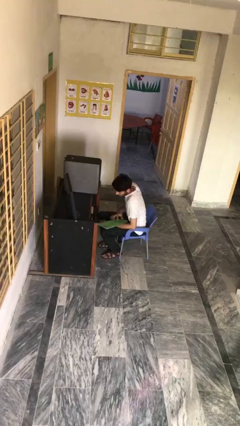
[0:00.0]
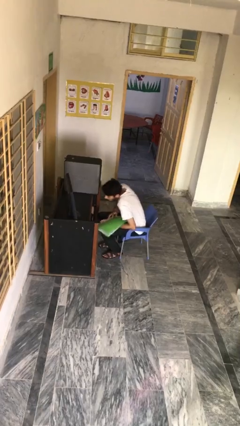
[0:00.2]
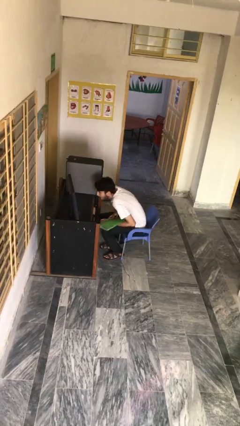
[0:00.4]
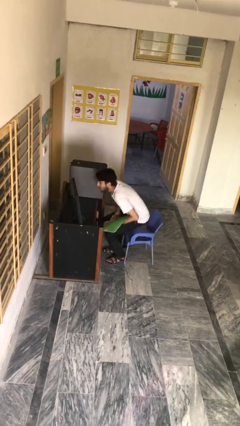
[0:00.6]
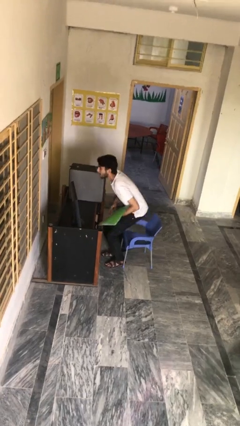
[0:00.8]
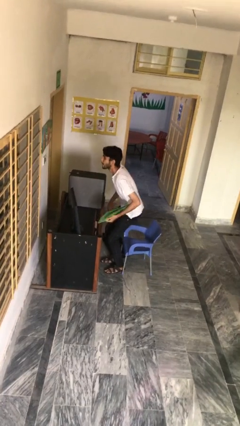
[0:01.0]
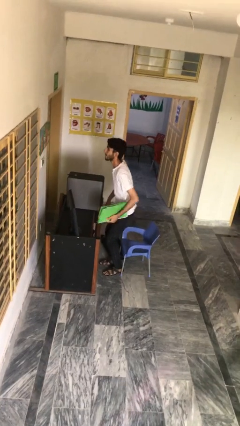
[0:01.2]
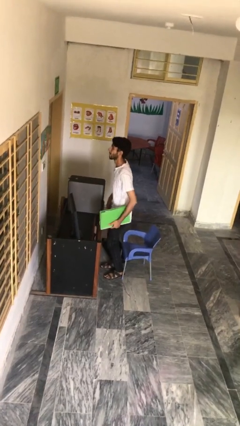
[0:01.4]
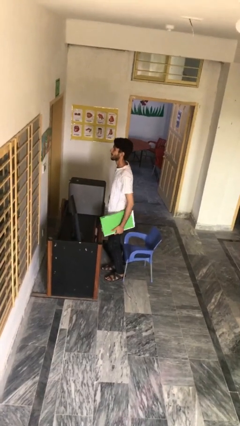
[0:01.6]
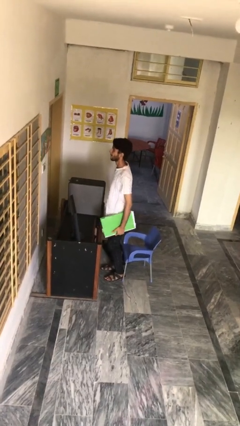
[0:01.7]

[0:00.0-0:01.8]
person stands up

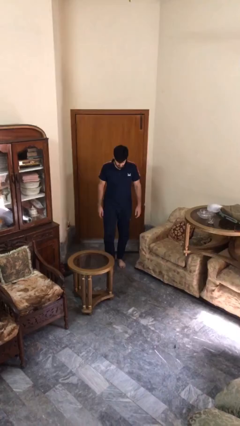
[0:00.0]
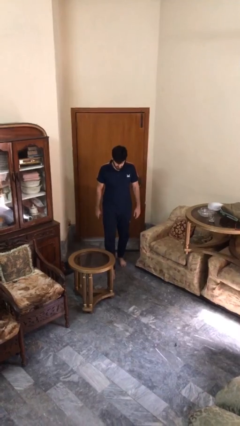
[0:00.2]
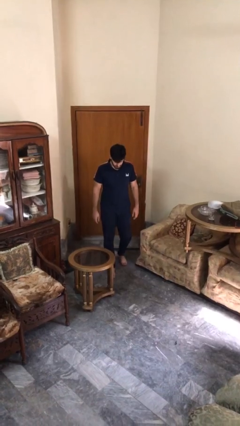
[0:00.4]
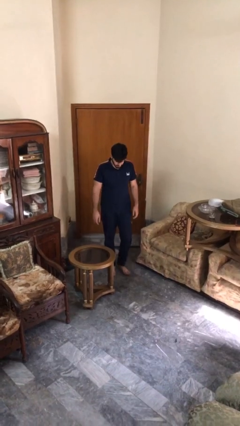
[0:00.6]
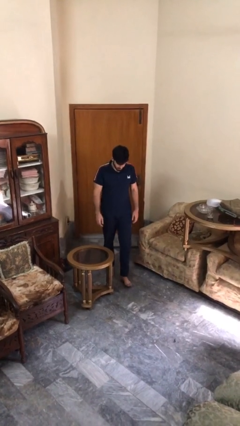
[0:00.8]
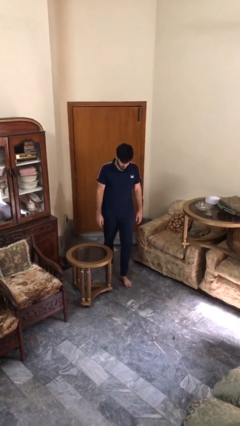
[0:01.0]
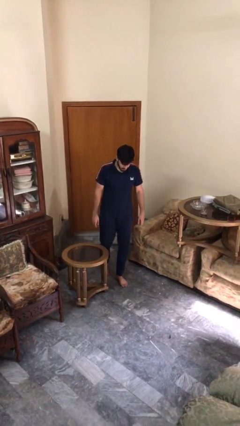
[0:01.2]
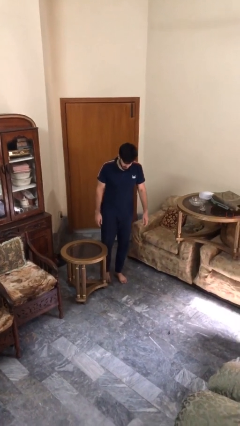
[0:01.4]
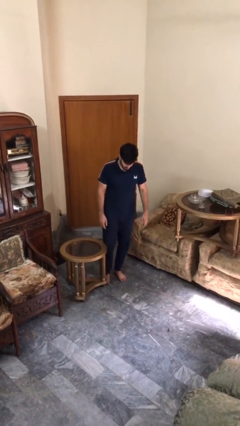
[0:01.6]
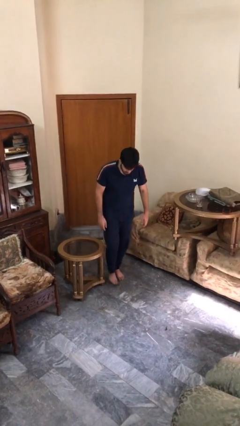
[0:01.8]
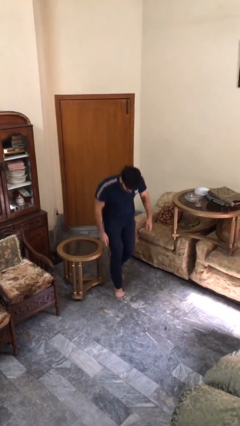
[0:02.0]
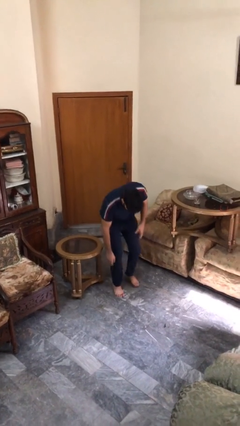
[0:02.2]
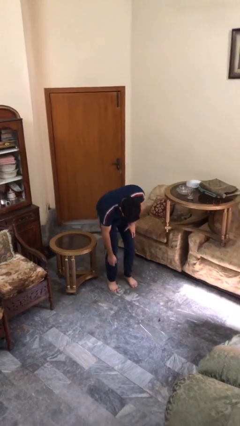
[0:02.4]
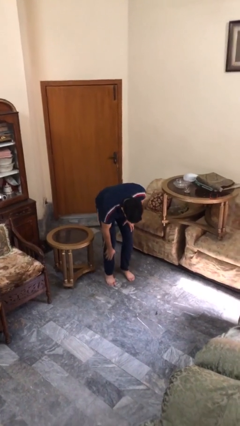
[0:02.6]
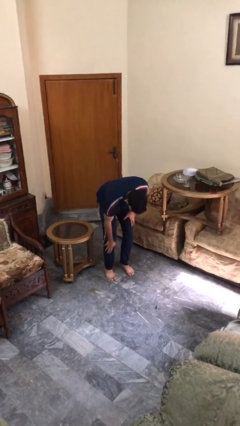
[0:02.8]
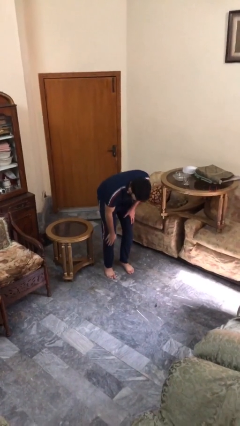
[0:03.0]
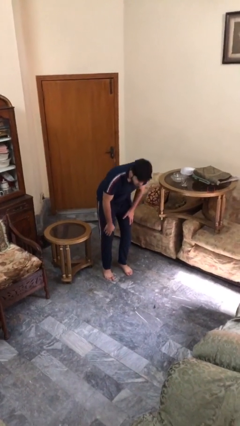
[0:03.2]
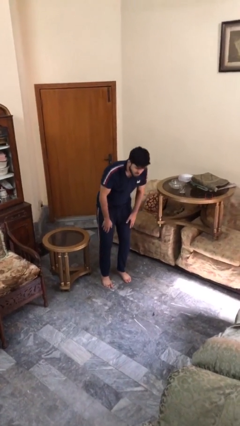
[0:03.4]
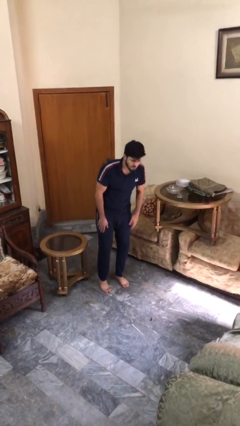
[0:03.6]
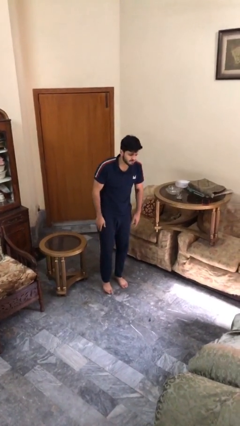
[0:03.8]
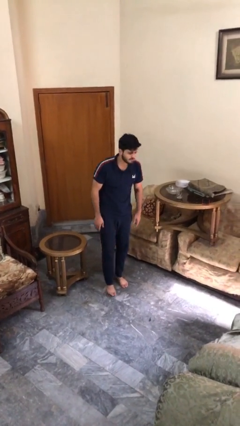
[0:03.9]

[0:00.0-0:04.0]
person stubs toe

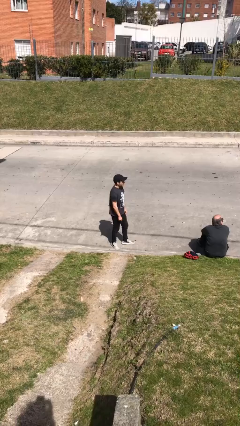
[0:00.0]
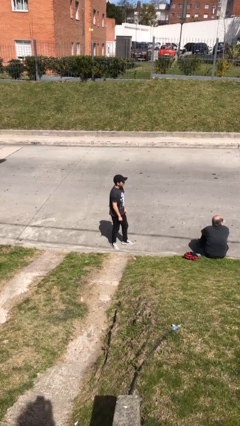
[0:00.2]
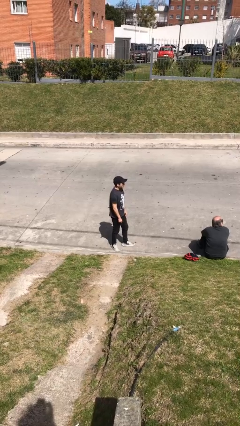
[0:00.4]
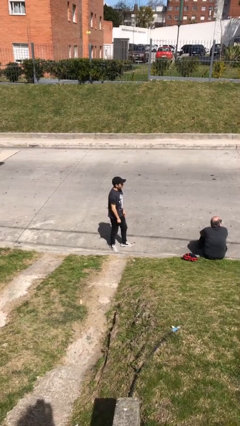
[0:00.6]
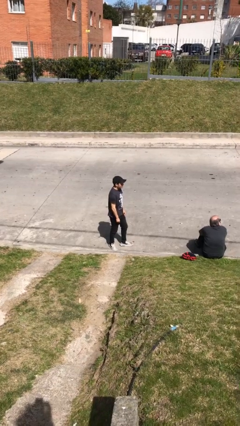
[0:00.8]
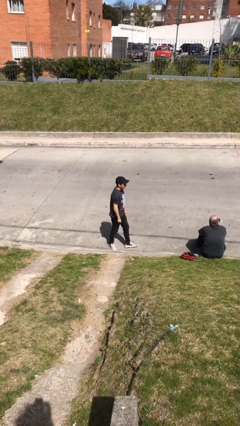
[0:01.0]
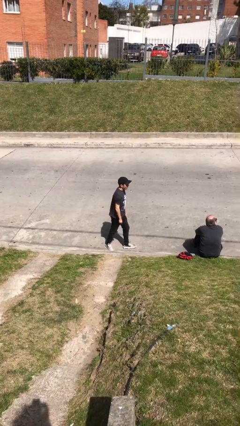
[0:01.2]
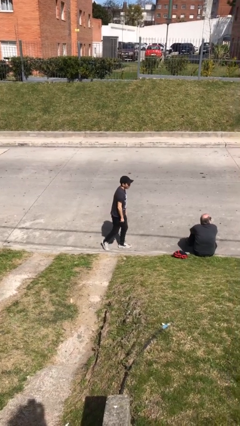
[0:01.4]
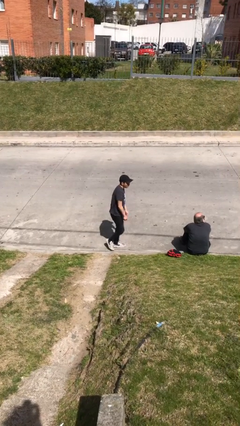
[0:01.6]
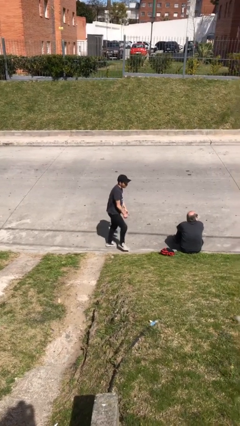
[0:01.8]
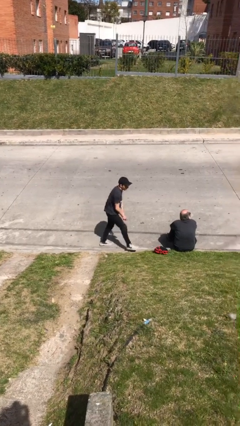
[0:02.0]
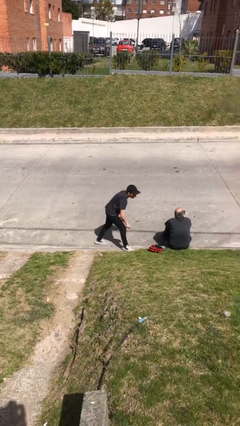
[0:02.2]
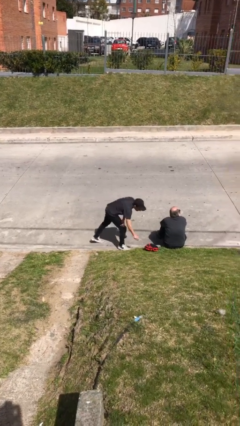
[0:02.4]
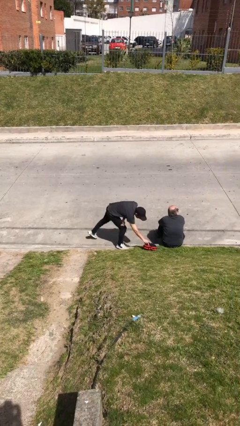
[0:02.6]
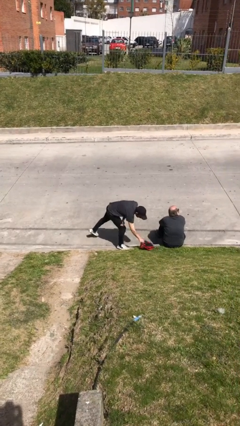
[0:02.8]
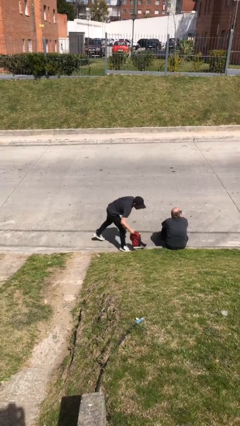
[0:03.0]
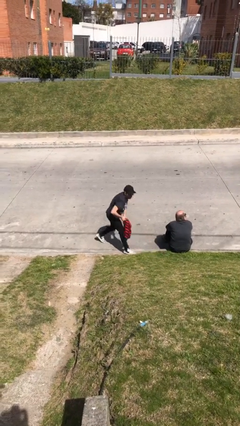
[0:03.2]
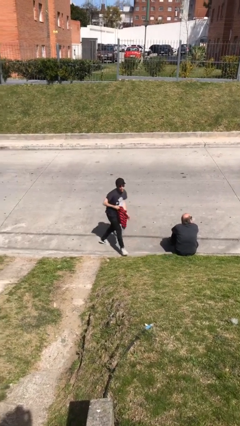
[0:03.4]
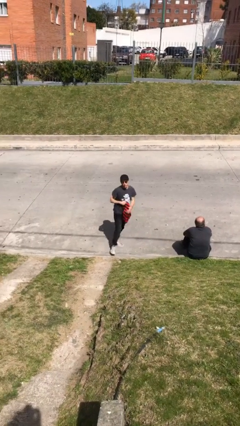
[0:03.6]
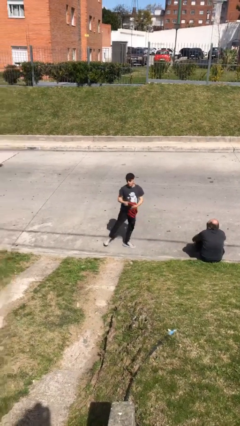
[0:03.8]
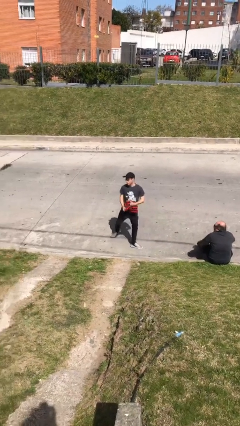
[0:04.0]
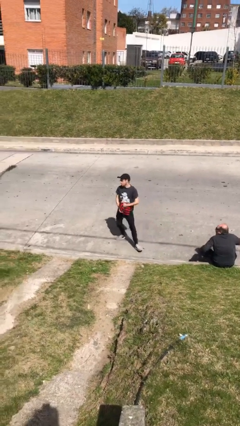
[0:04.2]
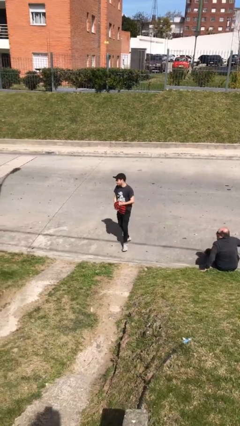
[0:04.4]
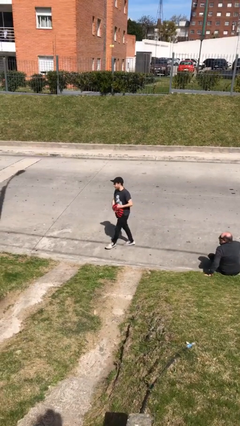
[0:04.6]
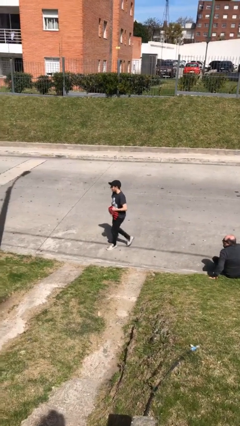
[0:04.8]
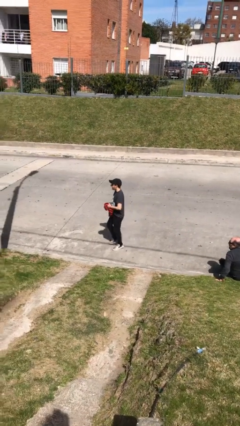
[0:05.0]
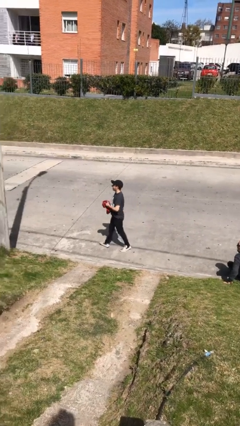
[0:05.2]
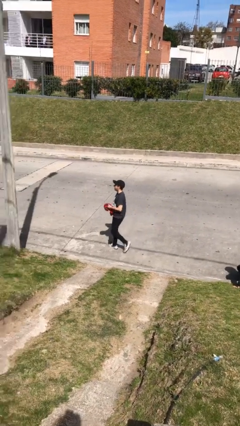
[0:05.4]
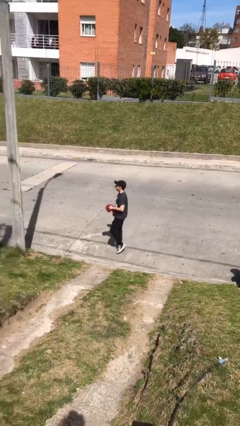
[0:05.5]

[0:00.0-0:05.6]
person steals object from person

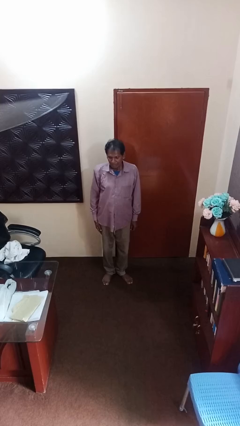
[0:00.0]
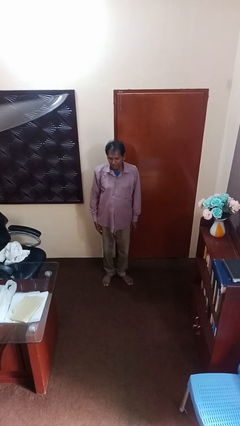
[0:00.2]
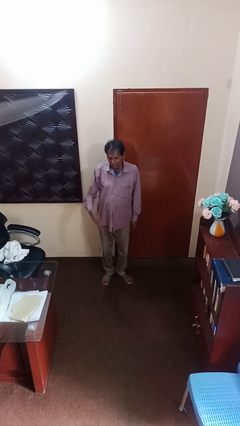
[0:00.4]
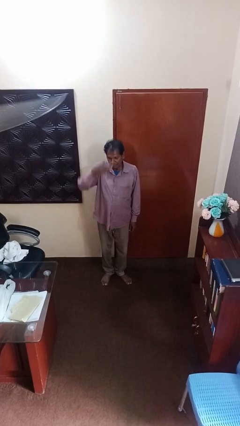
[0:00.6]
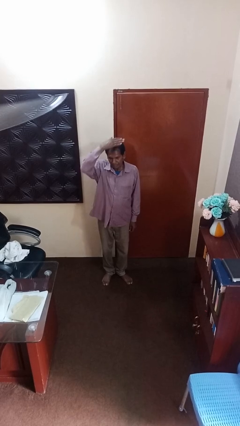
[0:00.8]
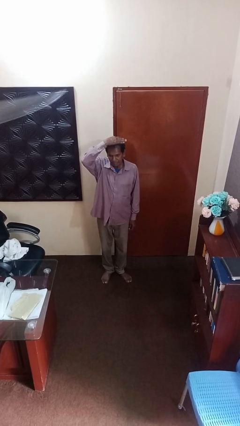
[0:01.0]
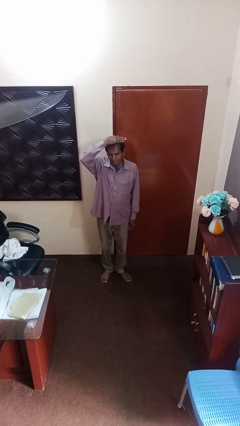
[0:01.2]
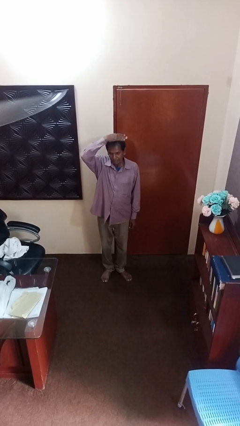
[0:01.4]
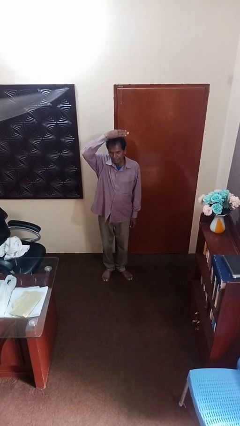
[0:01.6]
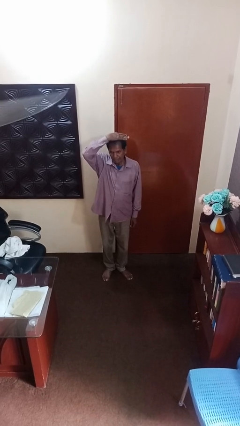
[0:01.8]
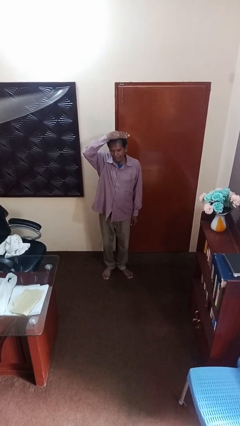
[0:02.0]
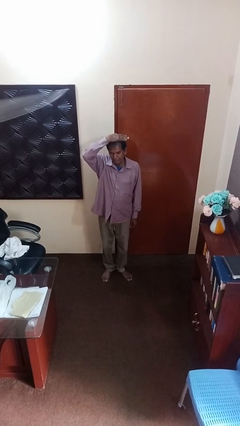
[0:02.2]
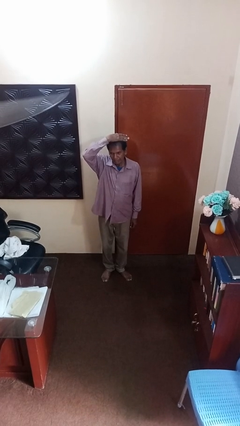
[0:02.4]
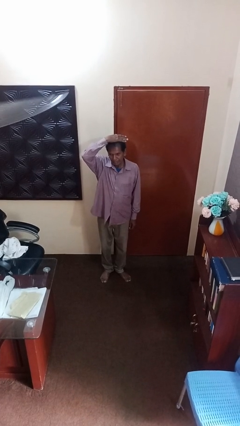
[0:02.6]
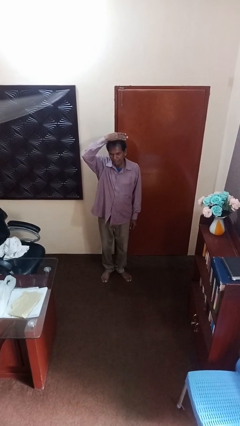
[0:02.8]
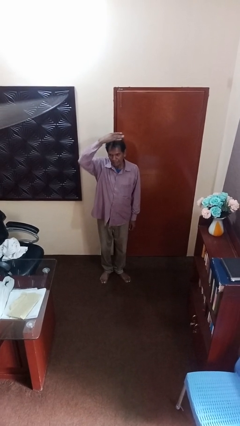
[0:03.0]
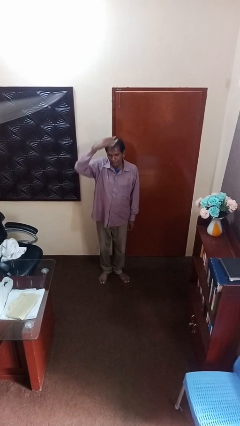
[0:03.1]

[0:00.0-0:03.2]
person pats head

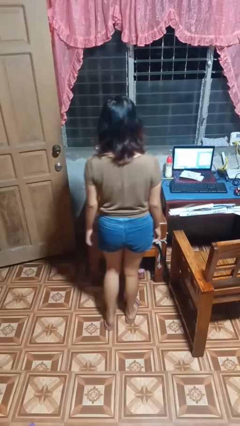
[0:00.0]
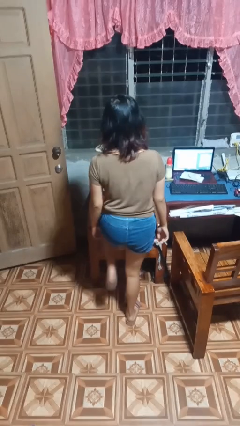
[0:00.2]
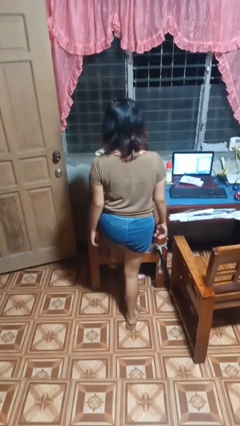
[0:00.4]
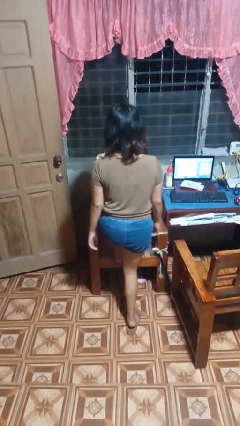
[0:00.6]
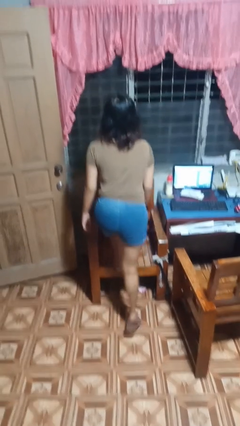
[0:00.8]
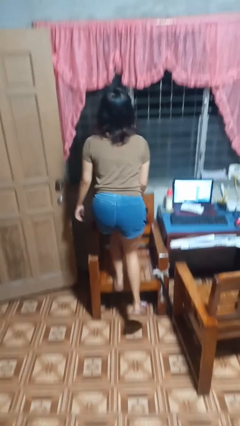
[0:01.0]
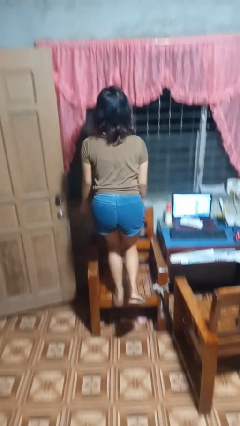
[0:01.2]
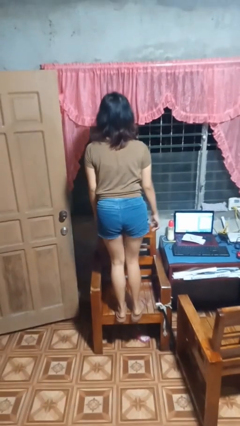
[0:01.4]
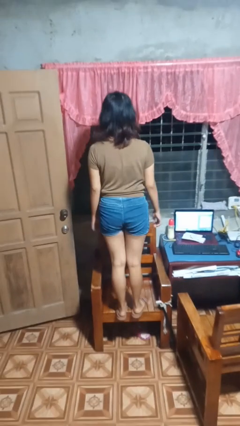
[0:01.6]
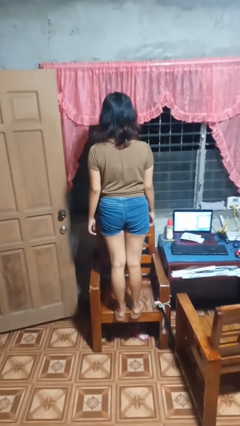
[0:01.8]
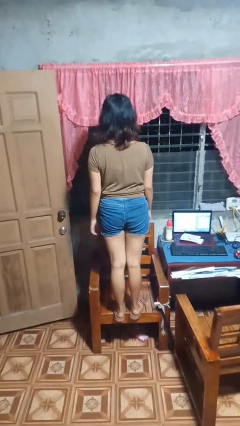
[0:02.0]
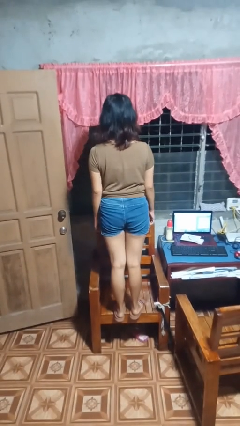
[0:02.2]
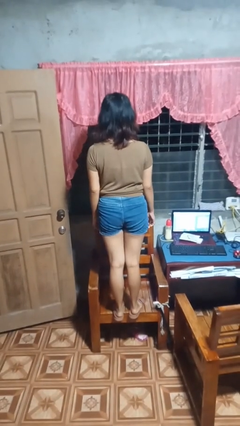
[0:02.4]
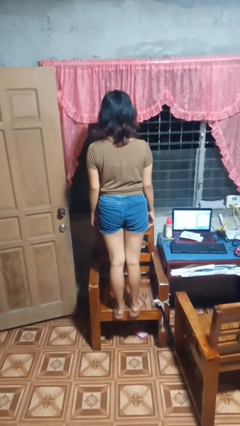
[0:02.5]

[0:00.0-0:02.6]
person climbs on chair

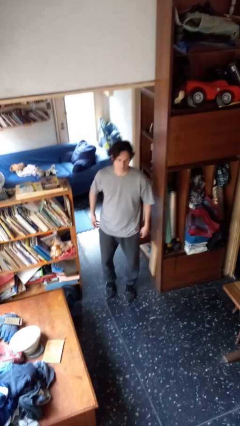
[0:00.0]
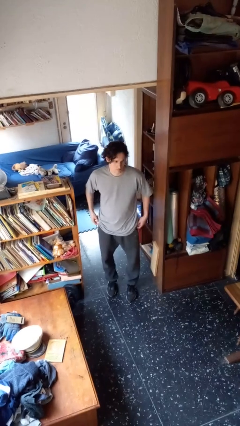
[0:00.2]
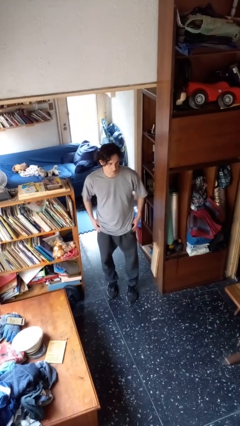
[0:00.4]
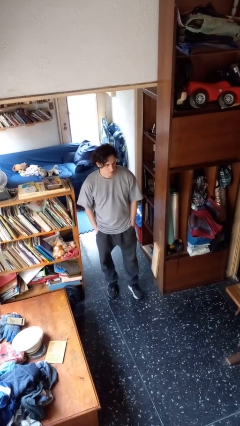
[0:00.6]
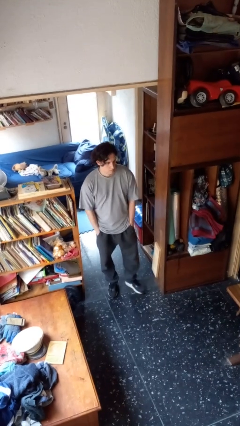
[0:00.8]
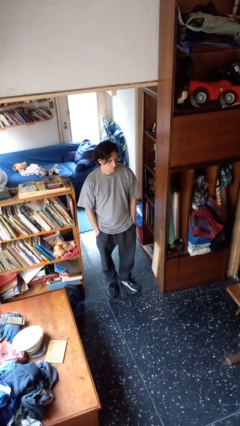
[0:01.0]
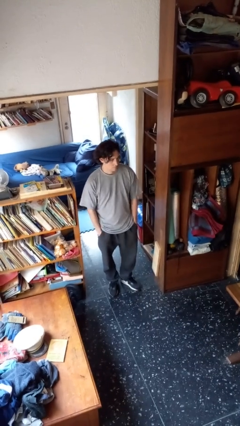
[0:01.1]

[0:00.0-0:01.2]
person puts hands in back pockets
